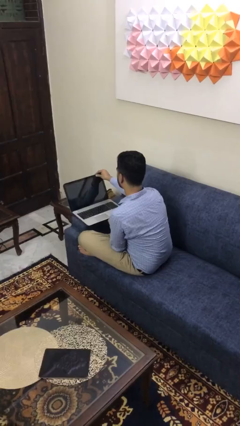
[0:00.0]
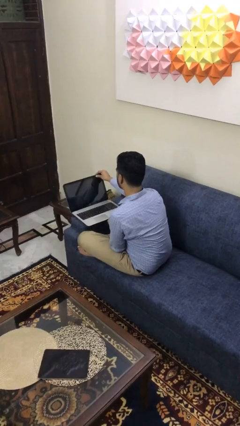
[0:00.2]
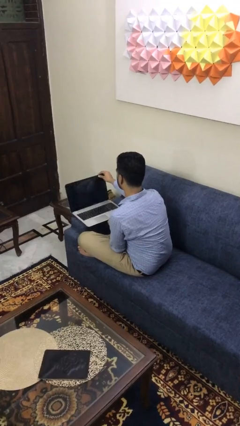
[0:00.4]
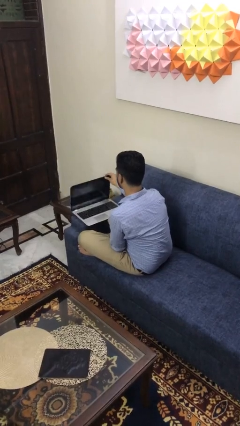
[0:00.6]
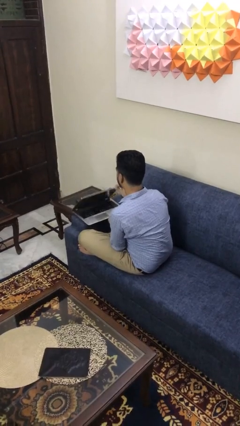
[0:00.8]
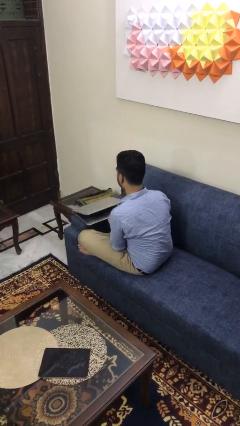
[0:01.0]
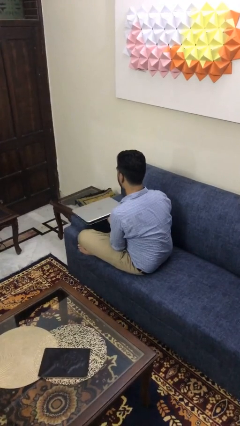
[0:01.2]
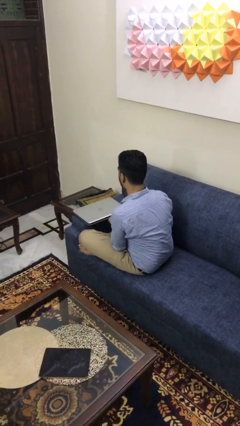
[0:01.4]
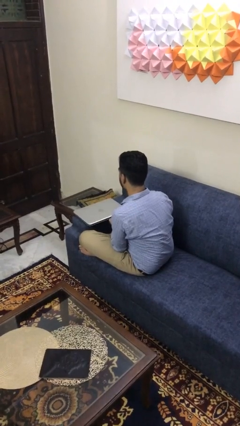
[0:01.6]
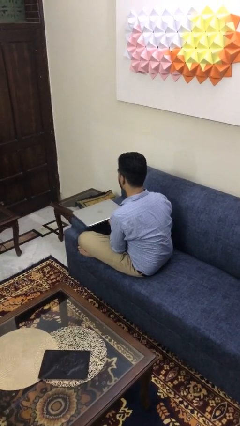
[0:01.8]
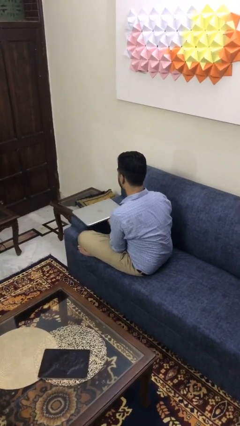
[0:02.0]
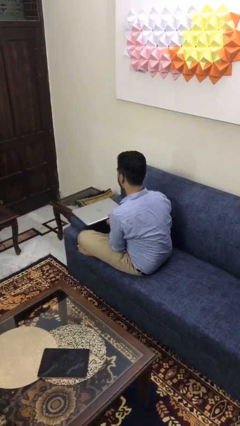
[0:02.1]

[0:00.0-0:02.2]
person closes laptop

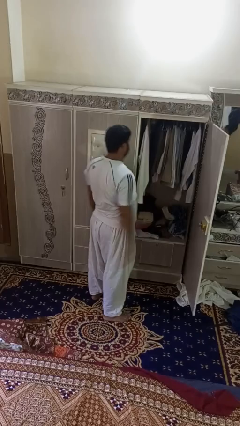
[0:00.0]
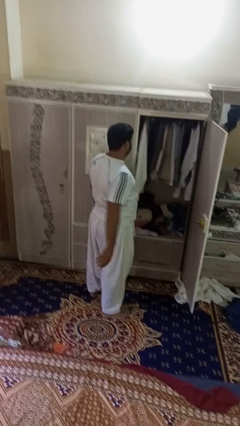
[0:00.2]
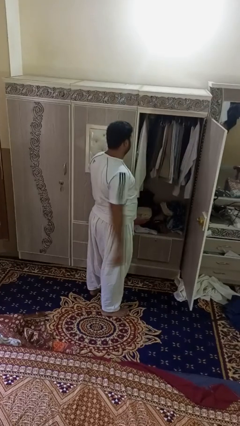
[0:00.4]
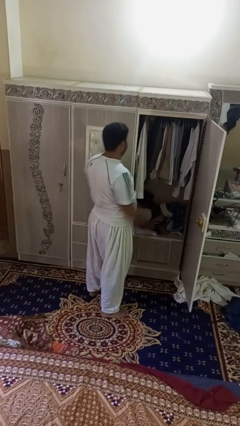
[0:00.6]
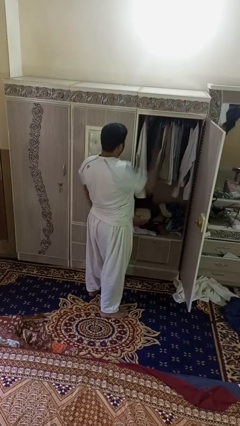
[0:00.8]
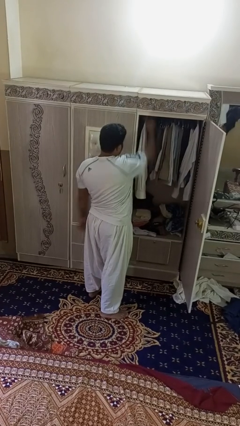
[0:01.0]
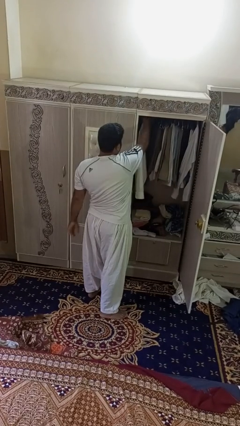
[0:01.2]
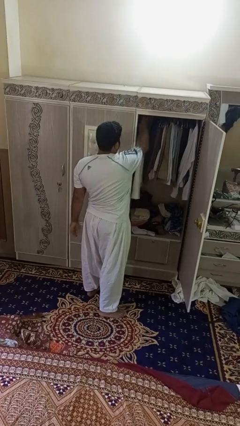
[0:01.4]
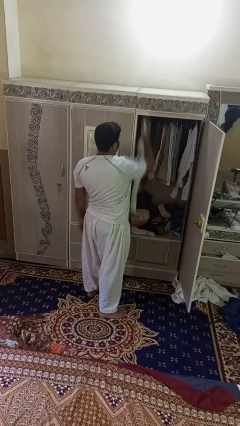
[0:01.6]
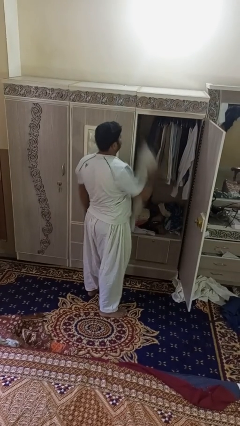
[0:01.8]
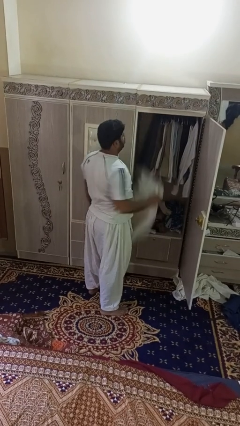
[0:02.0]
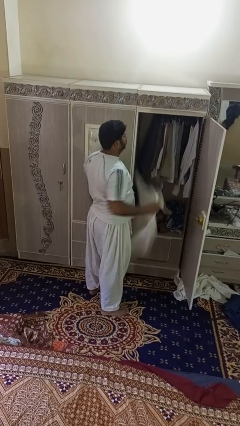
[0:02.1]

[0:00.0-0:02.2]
person takes clothes from closet

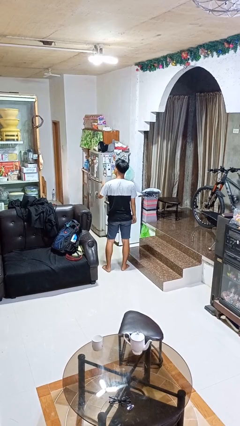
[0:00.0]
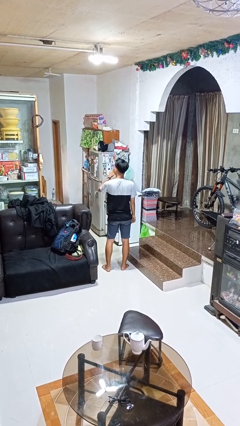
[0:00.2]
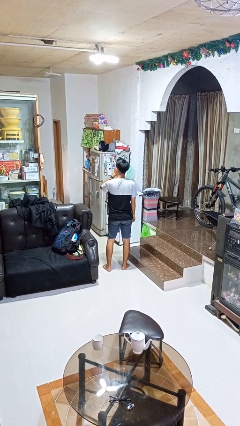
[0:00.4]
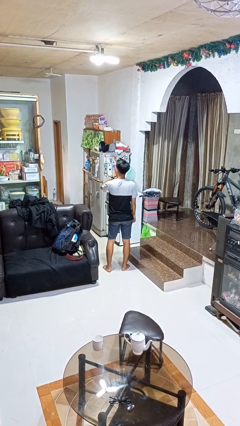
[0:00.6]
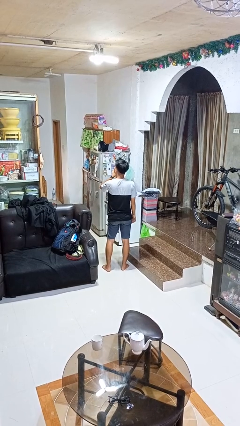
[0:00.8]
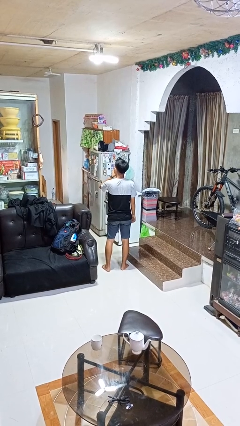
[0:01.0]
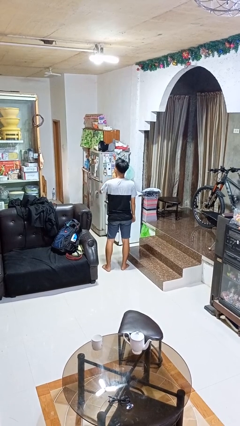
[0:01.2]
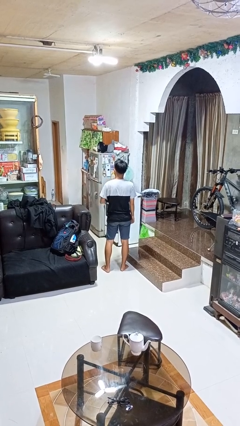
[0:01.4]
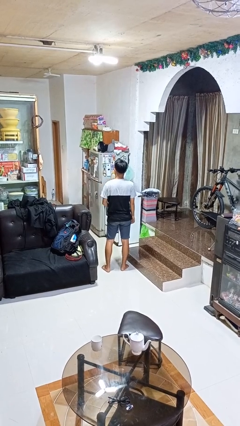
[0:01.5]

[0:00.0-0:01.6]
person gestures be quiet

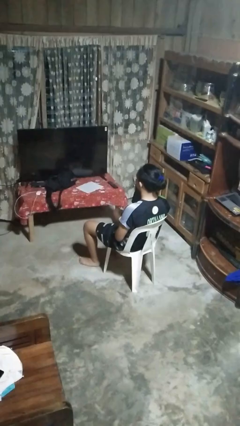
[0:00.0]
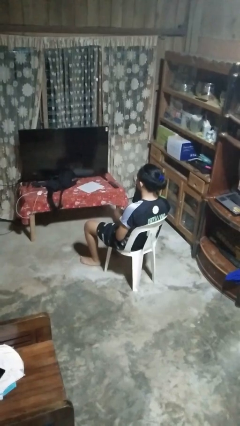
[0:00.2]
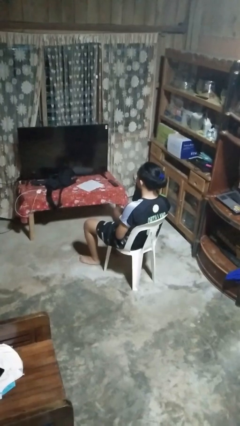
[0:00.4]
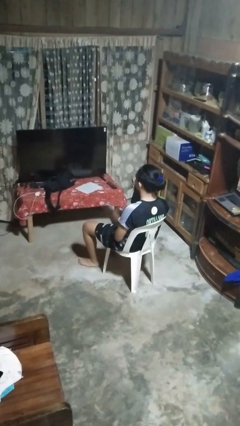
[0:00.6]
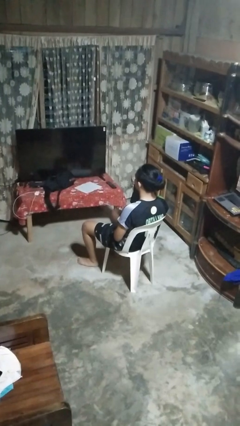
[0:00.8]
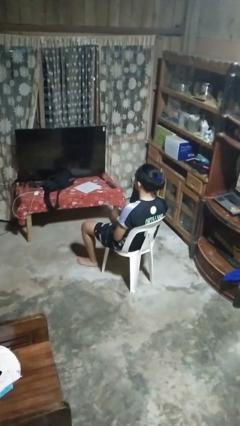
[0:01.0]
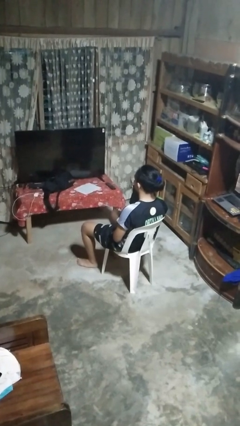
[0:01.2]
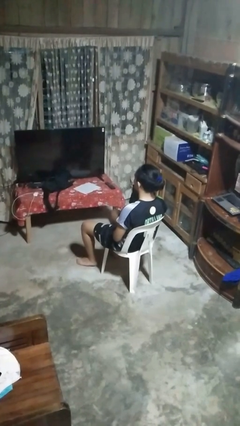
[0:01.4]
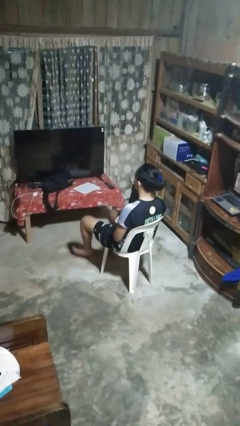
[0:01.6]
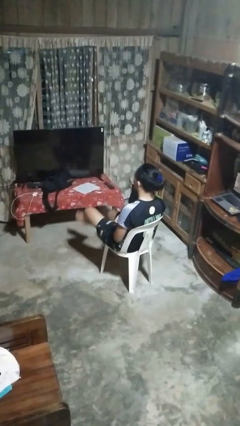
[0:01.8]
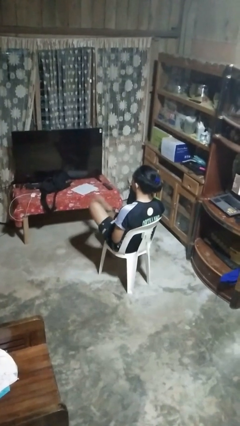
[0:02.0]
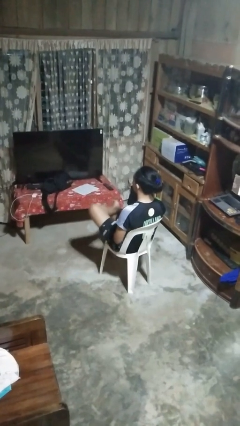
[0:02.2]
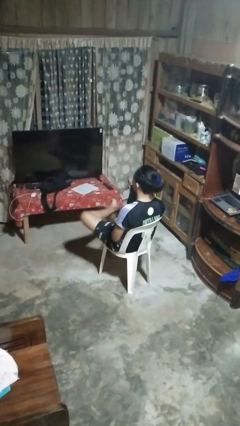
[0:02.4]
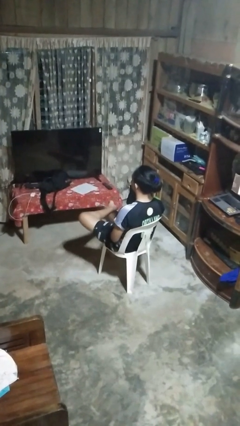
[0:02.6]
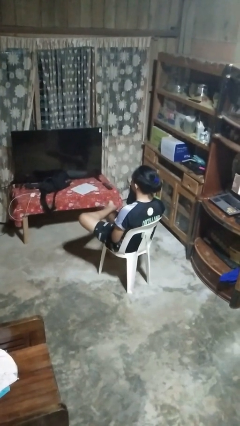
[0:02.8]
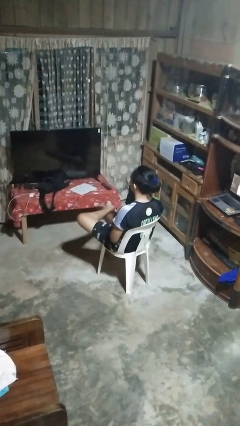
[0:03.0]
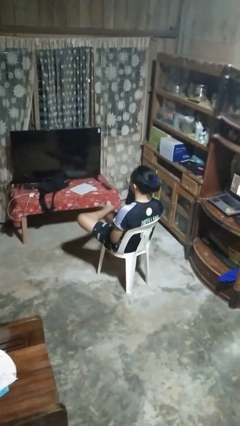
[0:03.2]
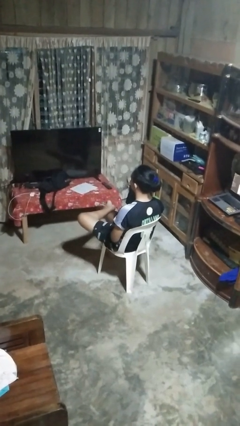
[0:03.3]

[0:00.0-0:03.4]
person crosses legs

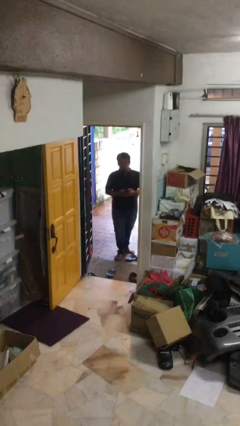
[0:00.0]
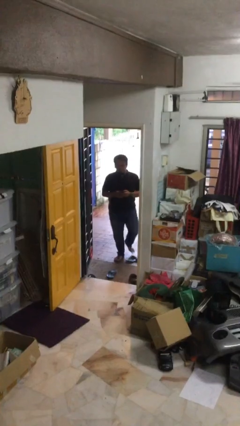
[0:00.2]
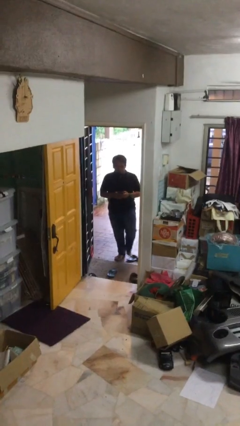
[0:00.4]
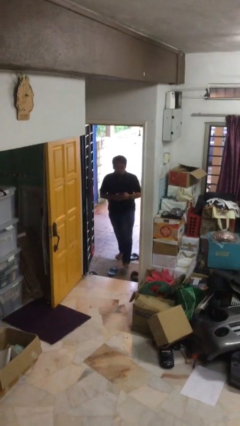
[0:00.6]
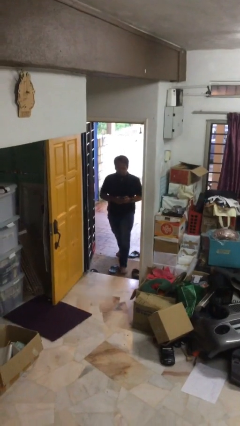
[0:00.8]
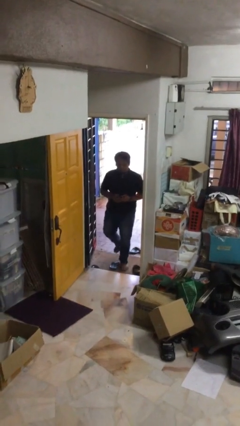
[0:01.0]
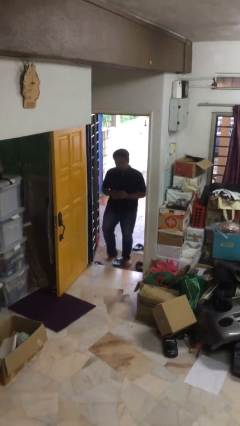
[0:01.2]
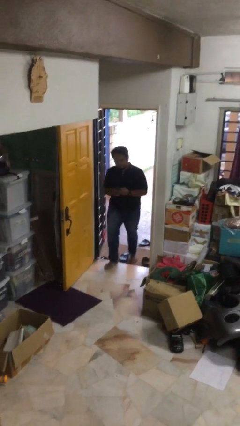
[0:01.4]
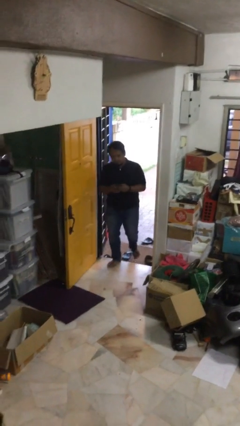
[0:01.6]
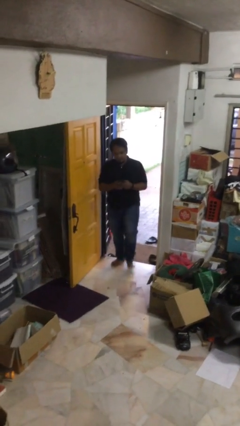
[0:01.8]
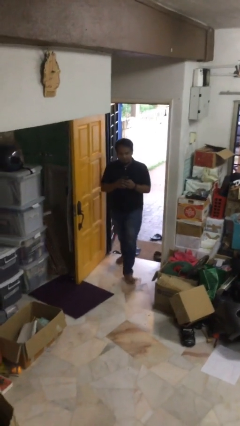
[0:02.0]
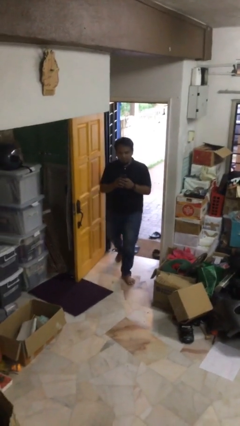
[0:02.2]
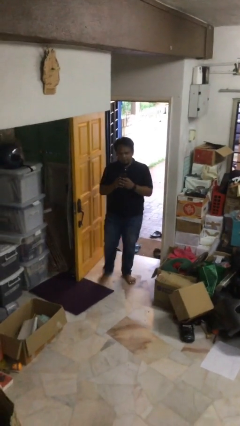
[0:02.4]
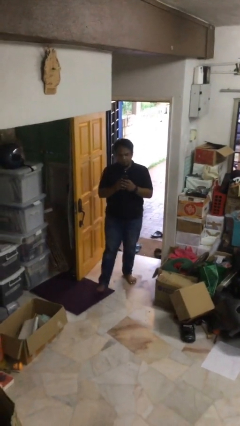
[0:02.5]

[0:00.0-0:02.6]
person enters scene through structure

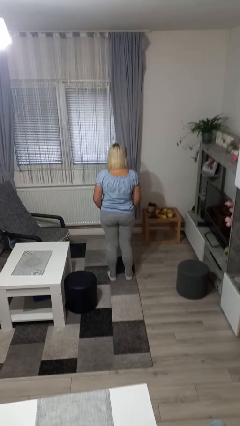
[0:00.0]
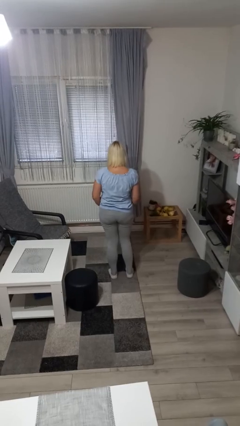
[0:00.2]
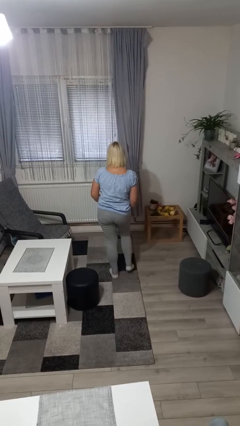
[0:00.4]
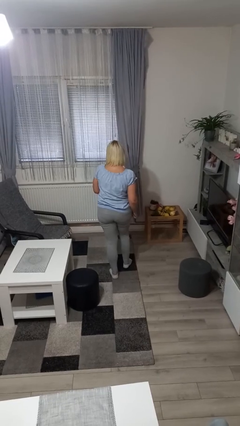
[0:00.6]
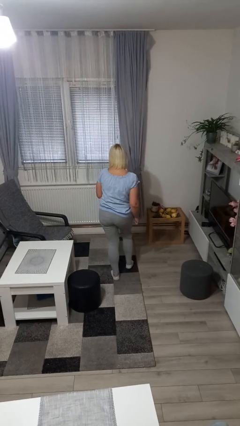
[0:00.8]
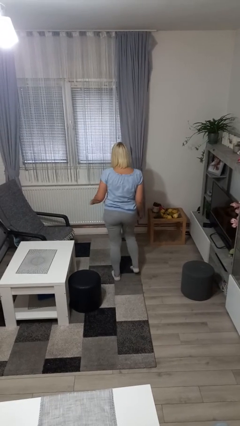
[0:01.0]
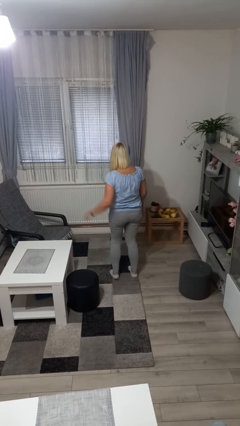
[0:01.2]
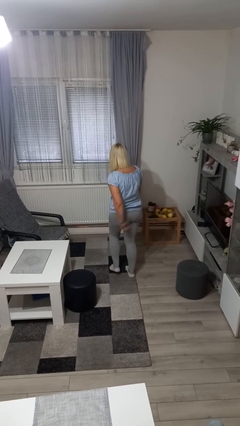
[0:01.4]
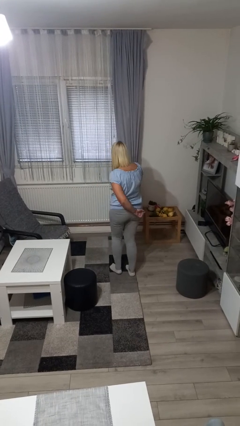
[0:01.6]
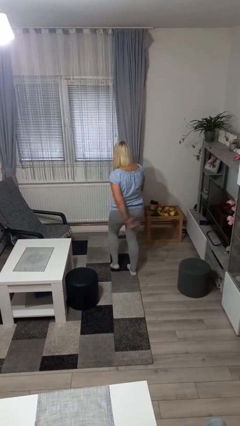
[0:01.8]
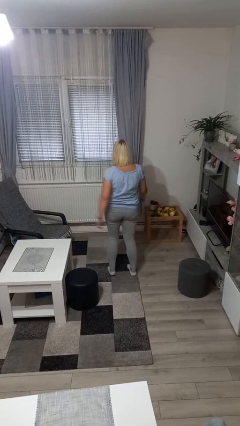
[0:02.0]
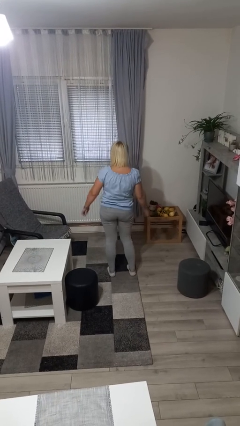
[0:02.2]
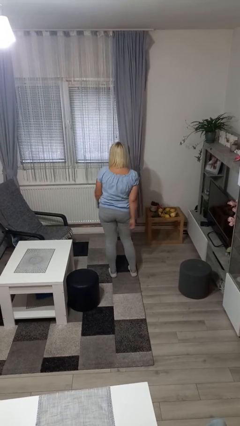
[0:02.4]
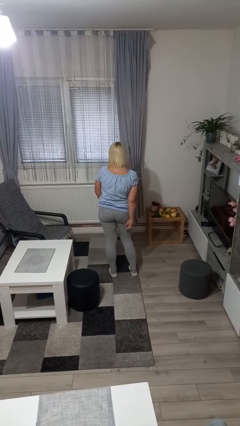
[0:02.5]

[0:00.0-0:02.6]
person dances in place

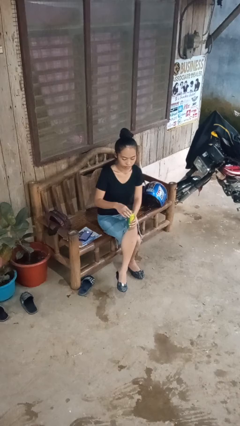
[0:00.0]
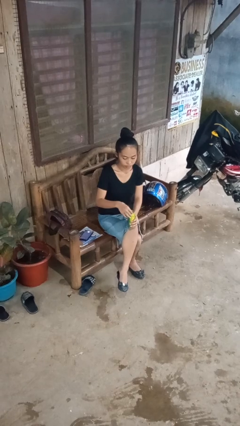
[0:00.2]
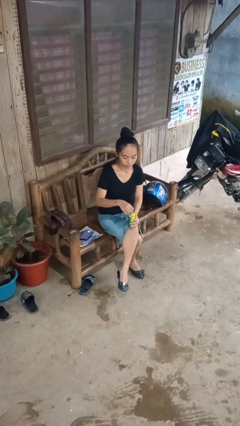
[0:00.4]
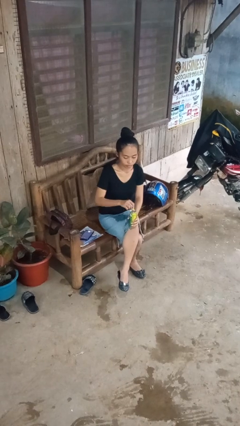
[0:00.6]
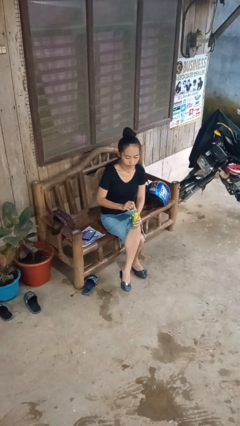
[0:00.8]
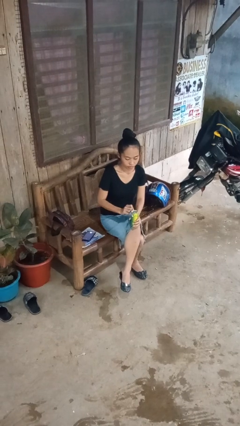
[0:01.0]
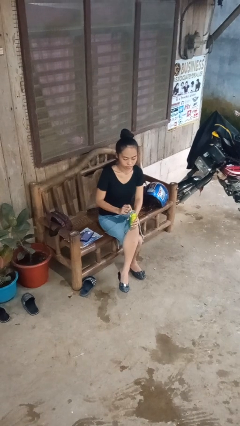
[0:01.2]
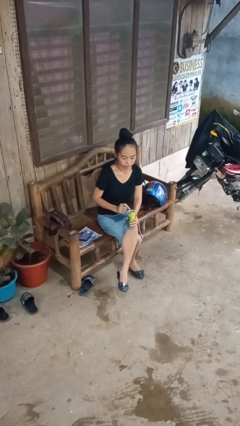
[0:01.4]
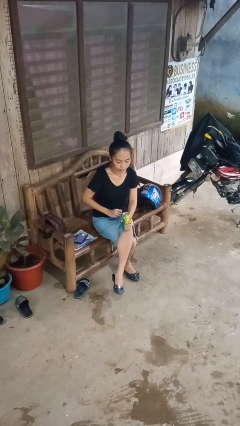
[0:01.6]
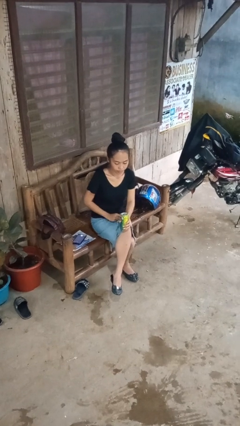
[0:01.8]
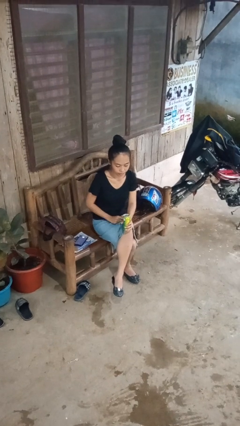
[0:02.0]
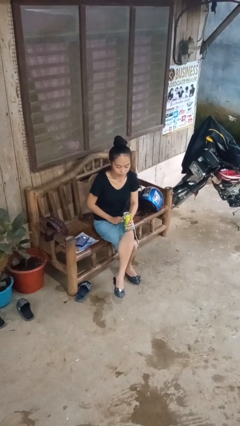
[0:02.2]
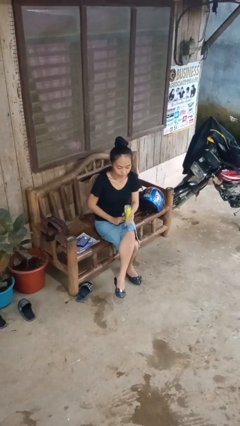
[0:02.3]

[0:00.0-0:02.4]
person opens beverage can

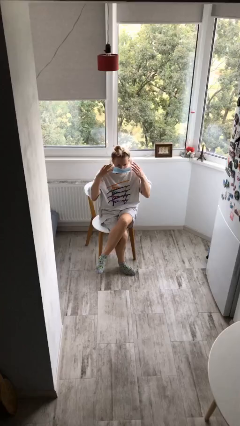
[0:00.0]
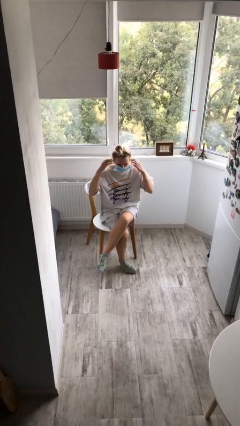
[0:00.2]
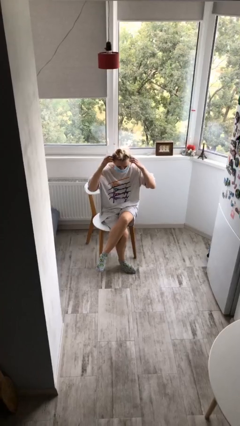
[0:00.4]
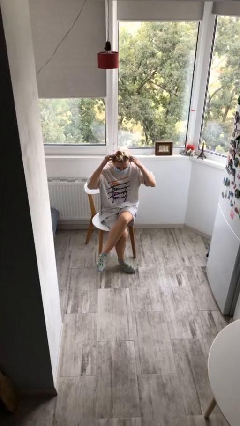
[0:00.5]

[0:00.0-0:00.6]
person puts on facemask
